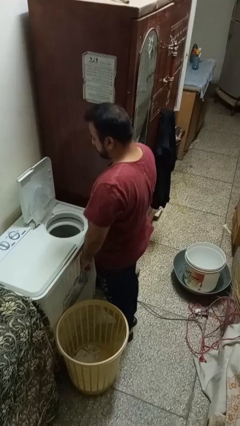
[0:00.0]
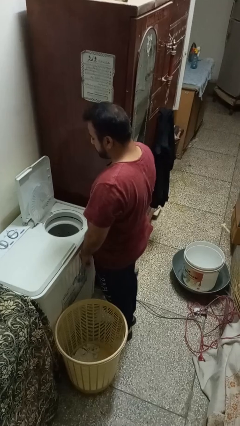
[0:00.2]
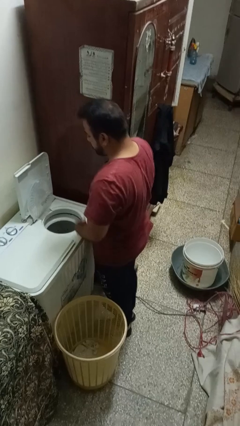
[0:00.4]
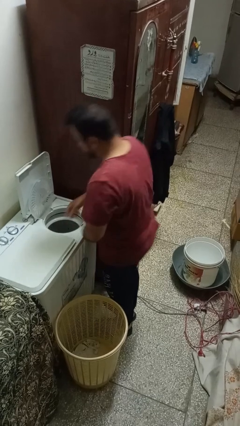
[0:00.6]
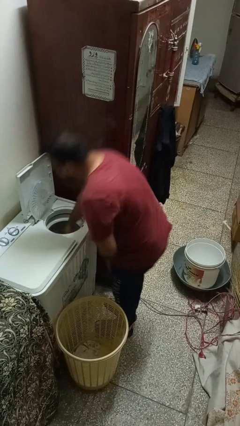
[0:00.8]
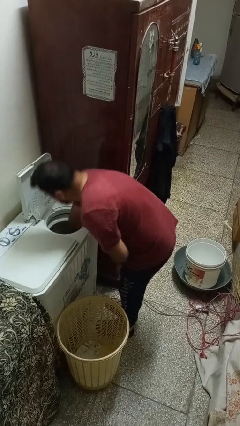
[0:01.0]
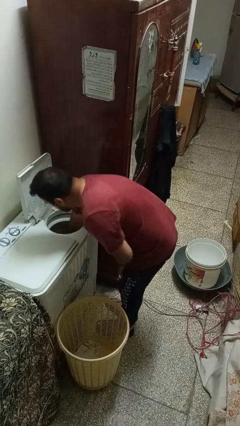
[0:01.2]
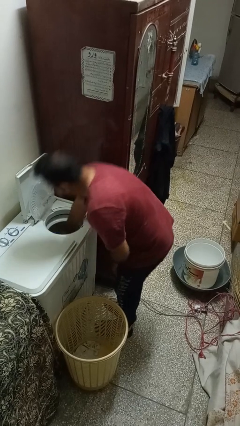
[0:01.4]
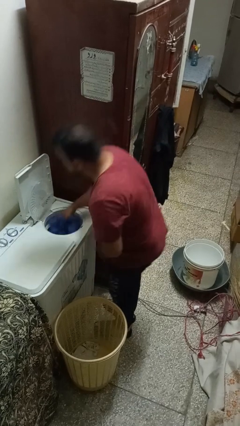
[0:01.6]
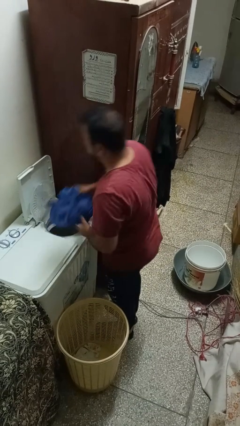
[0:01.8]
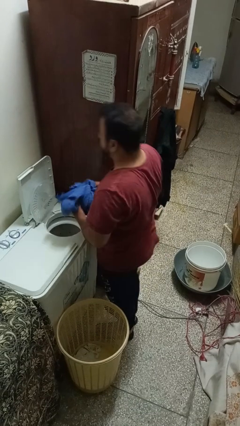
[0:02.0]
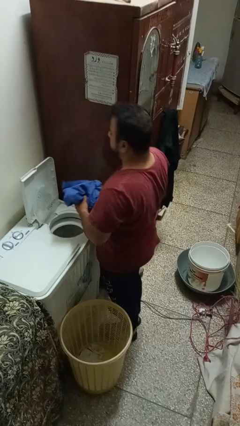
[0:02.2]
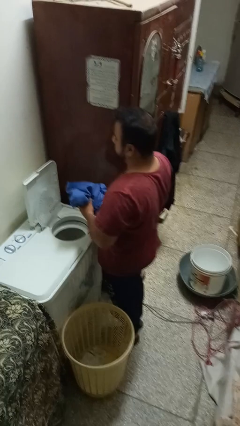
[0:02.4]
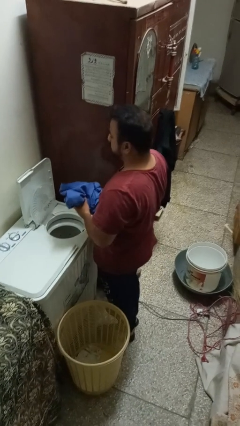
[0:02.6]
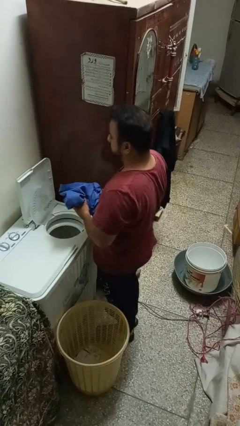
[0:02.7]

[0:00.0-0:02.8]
person unloads dryer

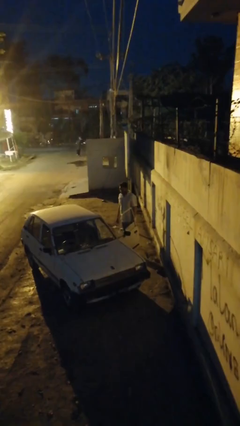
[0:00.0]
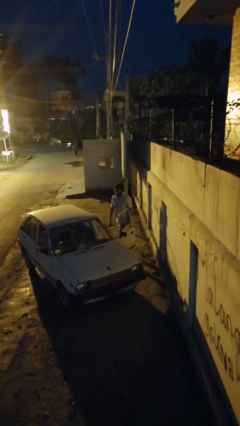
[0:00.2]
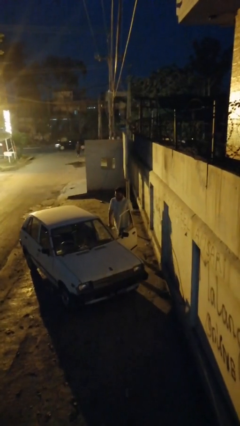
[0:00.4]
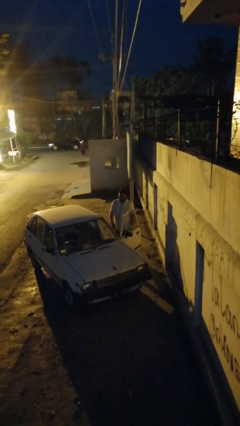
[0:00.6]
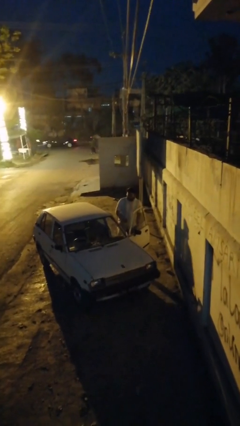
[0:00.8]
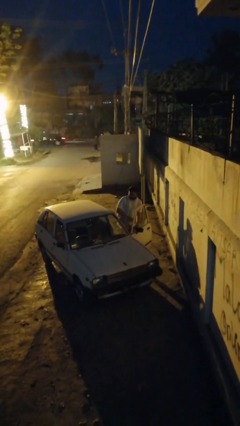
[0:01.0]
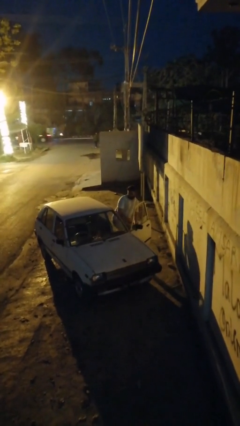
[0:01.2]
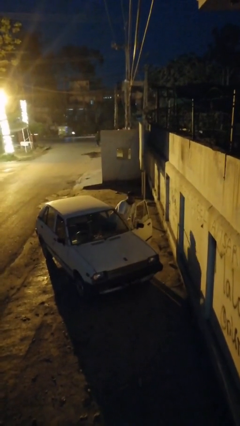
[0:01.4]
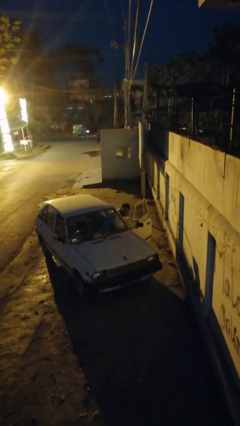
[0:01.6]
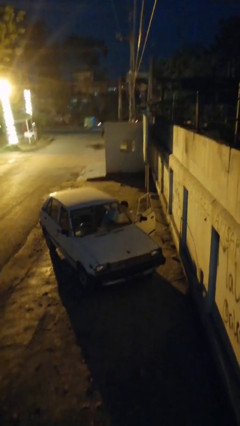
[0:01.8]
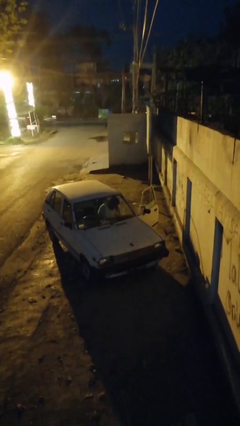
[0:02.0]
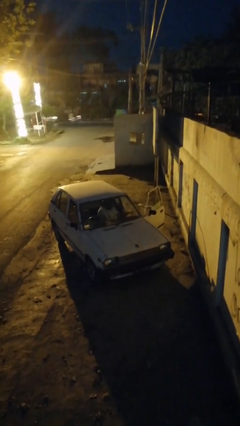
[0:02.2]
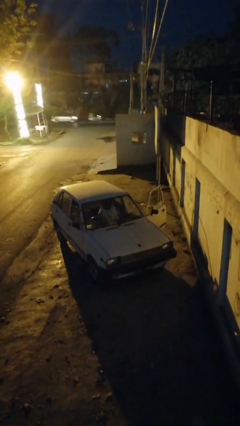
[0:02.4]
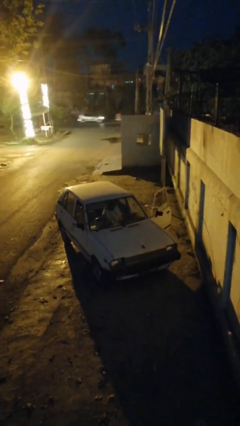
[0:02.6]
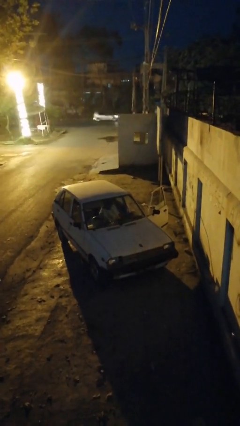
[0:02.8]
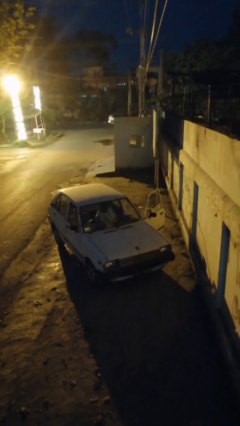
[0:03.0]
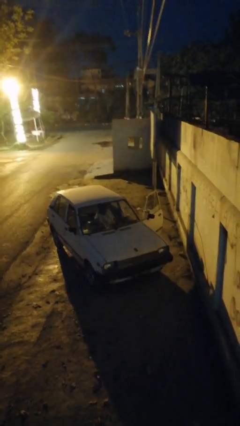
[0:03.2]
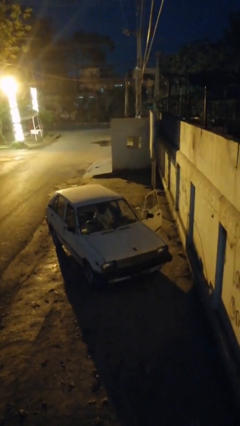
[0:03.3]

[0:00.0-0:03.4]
person enters car

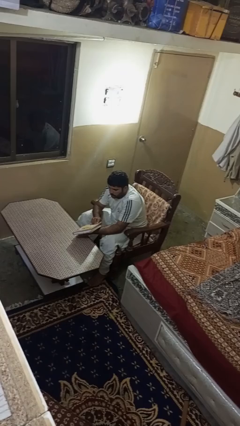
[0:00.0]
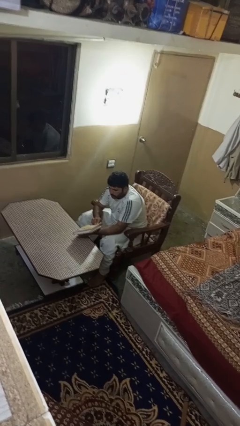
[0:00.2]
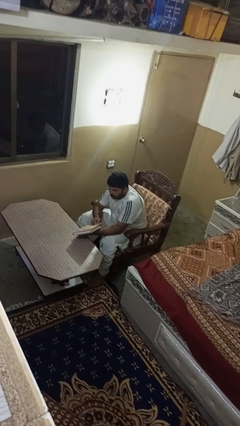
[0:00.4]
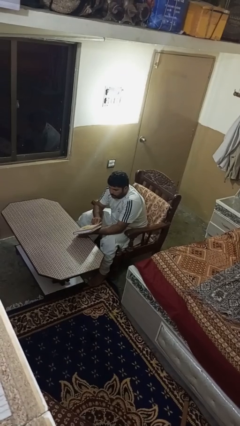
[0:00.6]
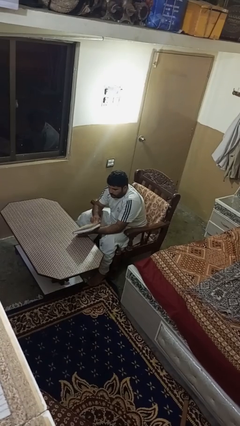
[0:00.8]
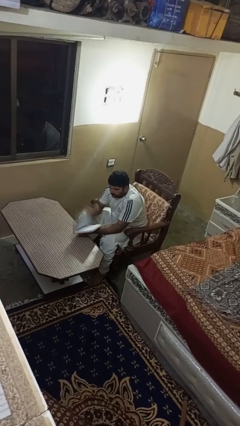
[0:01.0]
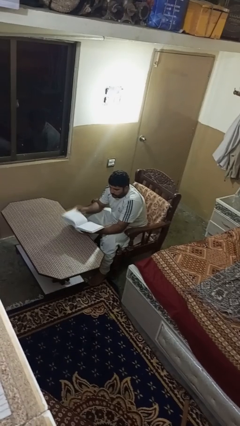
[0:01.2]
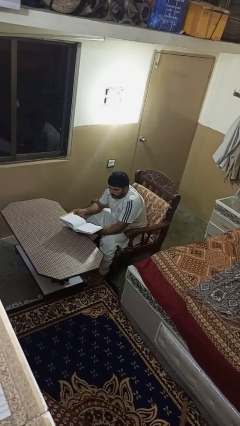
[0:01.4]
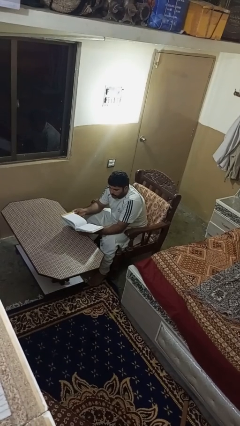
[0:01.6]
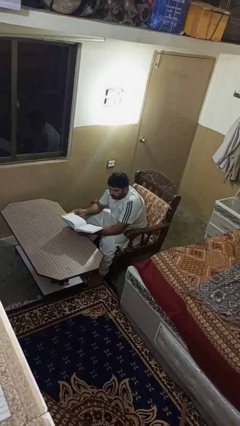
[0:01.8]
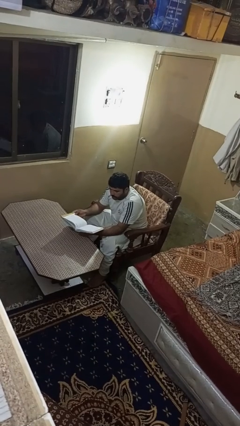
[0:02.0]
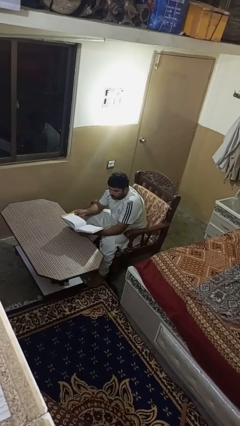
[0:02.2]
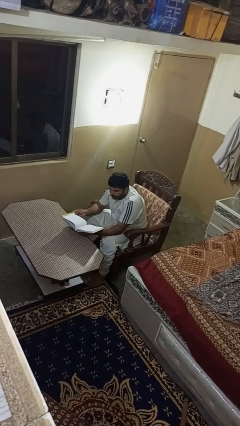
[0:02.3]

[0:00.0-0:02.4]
person reads book

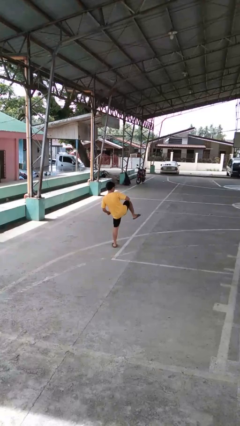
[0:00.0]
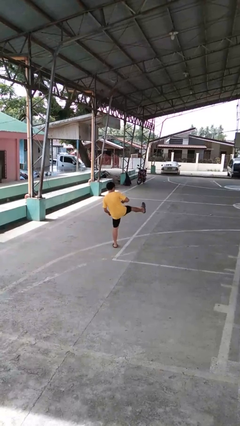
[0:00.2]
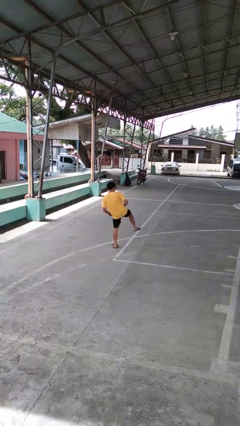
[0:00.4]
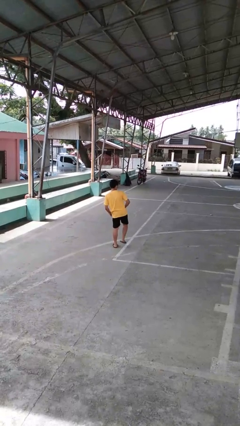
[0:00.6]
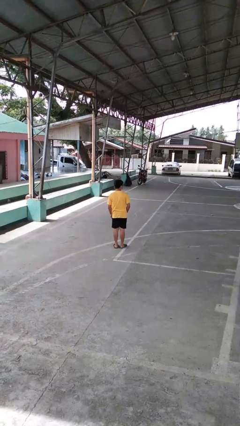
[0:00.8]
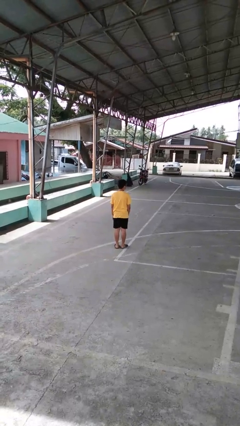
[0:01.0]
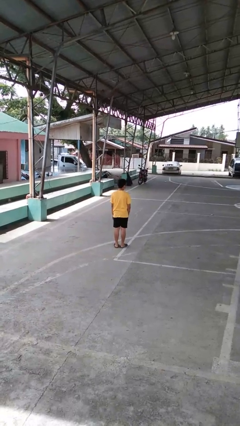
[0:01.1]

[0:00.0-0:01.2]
person karate kicks

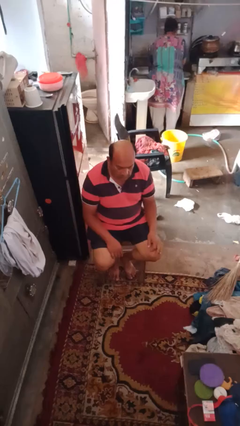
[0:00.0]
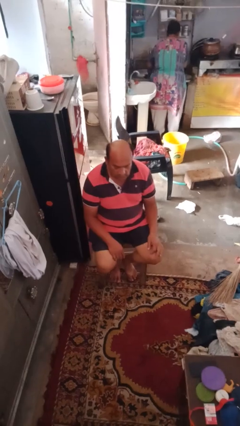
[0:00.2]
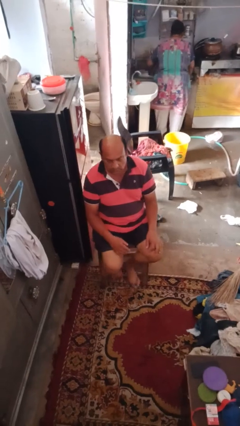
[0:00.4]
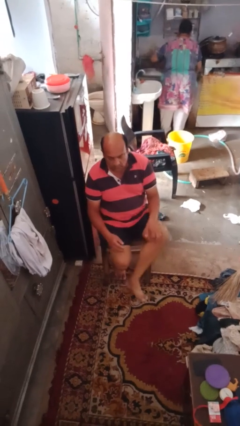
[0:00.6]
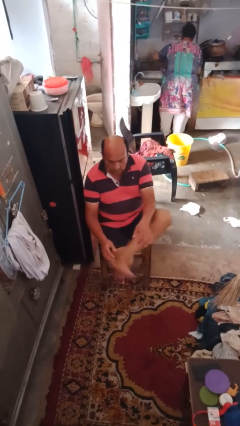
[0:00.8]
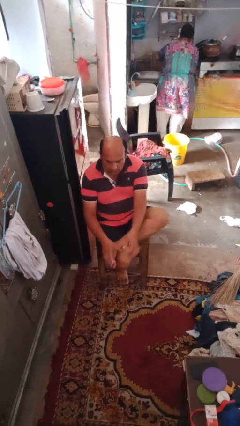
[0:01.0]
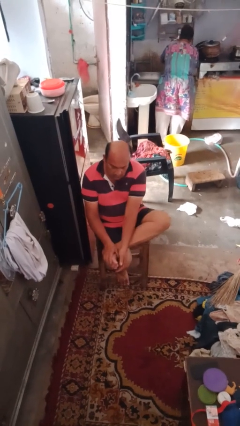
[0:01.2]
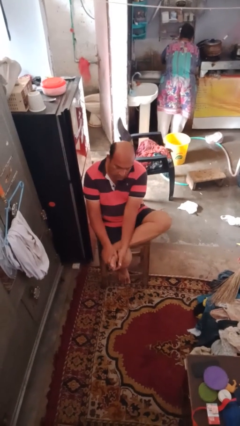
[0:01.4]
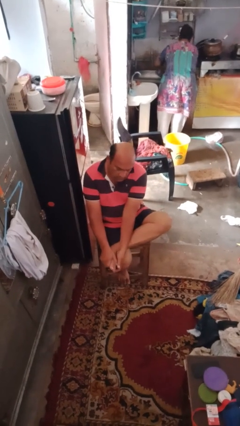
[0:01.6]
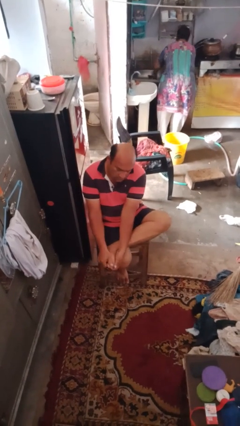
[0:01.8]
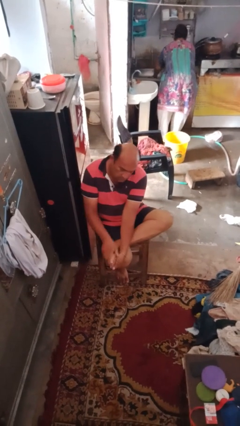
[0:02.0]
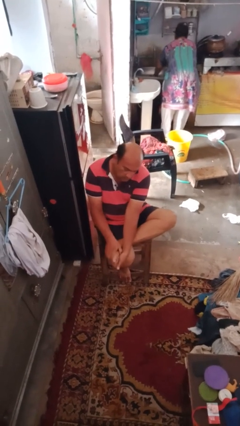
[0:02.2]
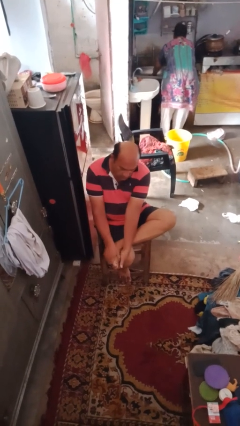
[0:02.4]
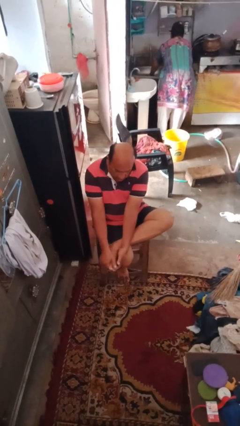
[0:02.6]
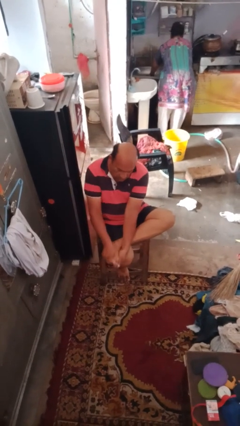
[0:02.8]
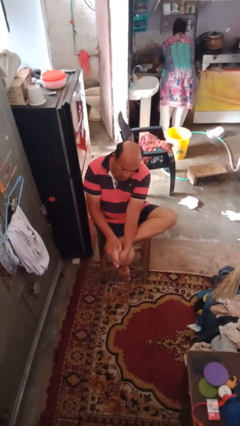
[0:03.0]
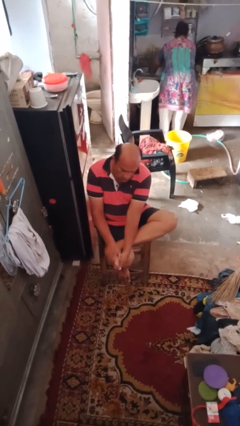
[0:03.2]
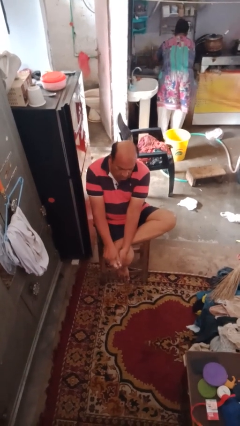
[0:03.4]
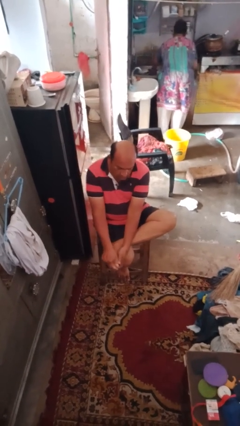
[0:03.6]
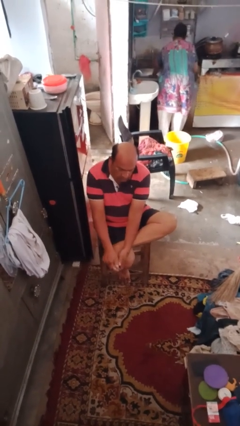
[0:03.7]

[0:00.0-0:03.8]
person rubs foot

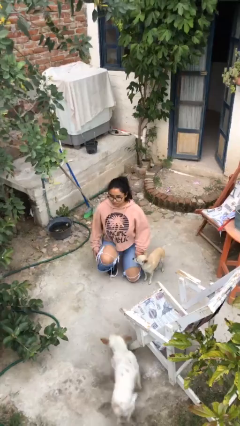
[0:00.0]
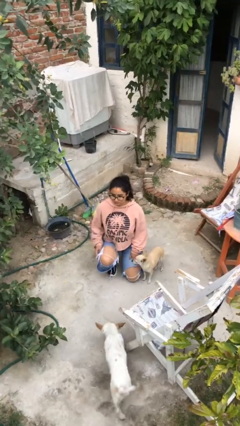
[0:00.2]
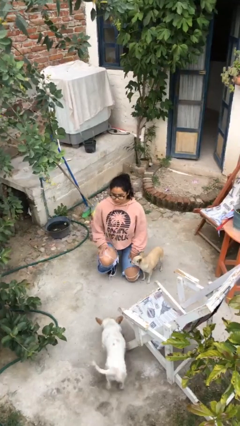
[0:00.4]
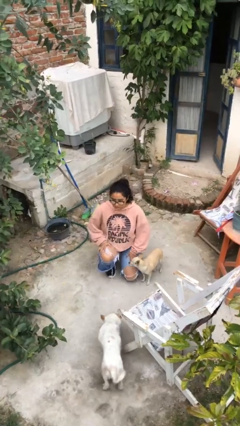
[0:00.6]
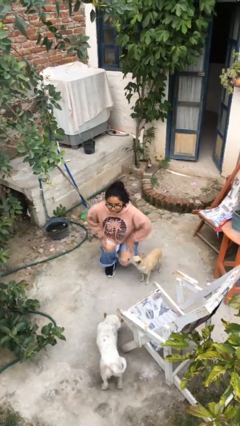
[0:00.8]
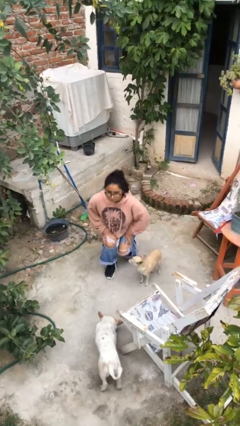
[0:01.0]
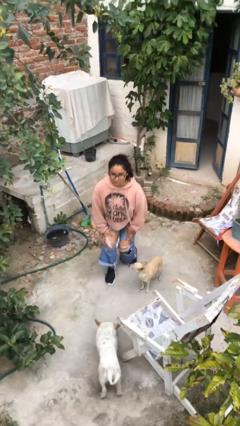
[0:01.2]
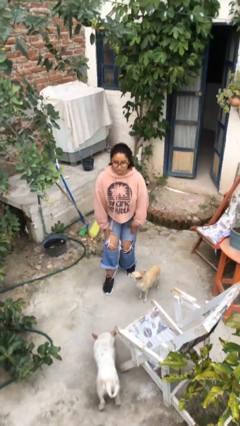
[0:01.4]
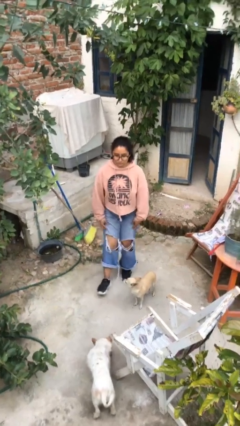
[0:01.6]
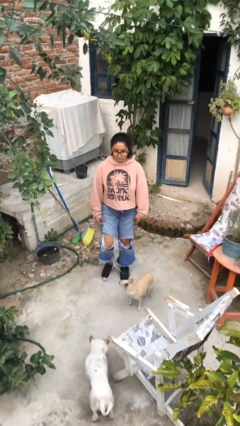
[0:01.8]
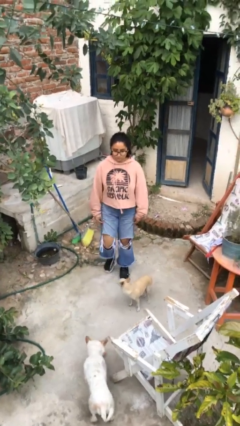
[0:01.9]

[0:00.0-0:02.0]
person stands up from floor

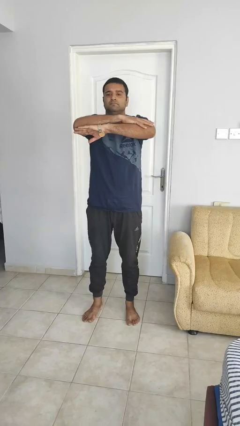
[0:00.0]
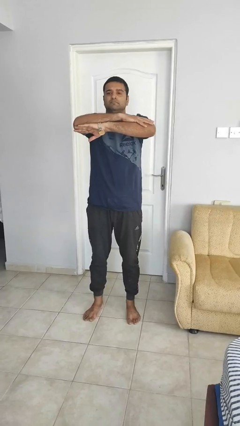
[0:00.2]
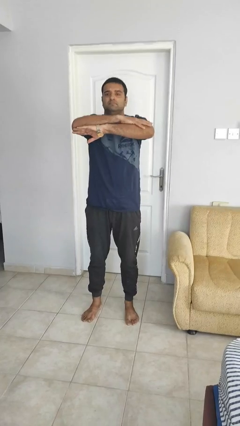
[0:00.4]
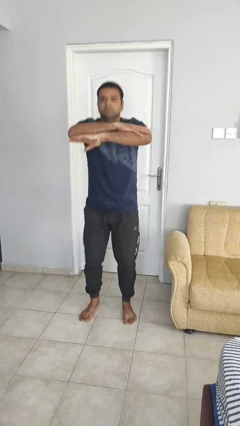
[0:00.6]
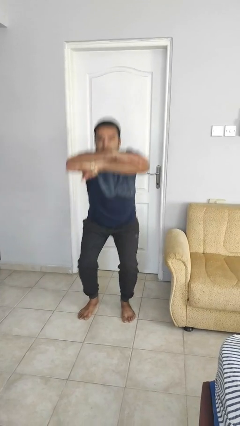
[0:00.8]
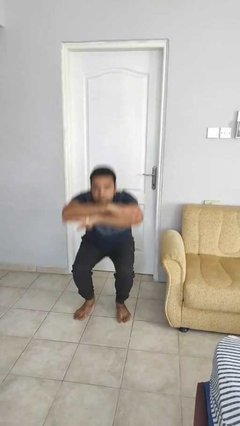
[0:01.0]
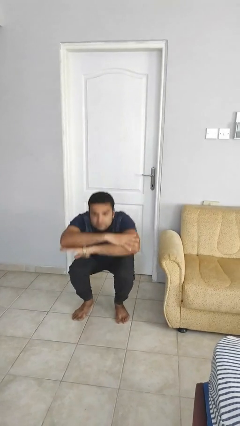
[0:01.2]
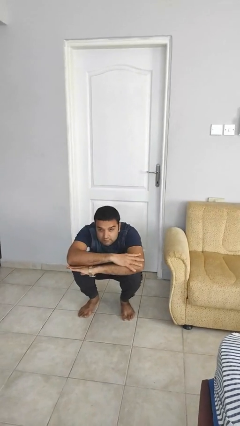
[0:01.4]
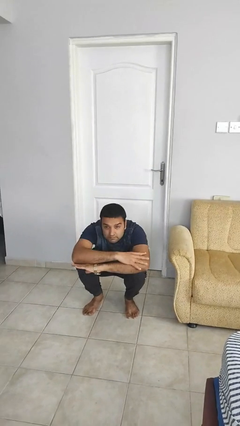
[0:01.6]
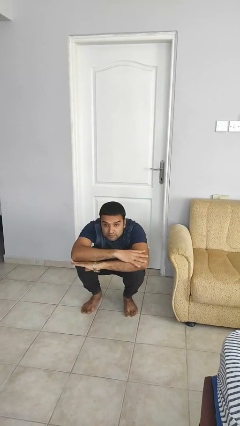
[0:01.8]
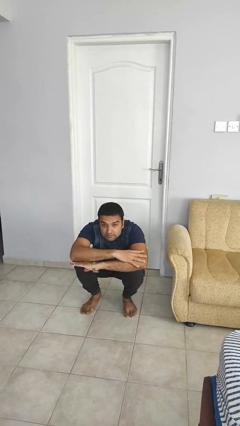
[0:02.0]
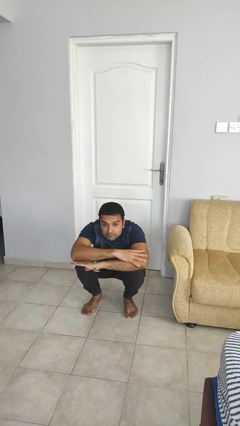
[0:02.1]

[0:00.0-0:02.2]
person squats
